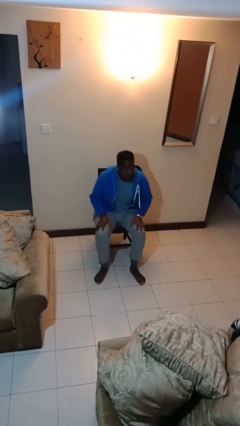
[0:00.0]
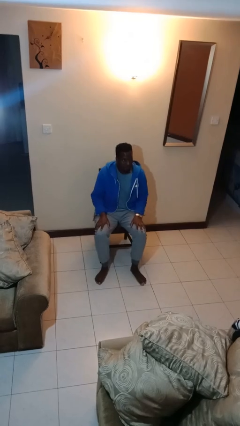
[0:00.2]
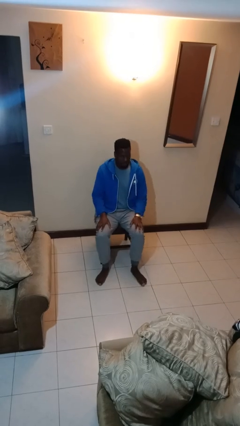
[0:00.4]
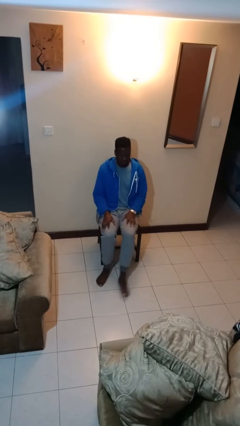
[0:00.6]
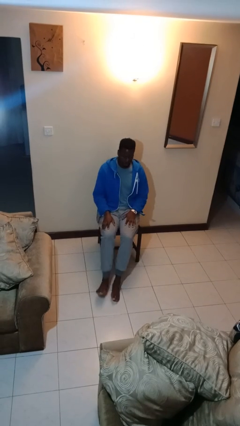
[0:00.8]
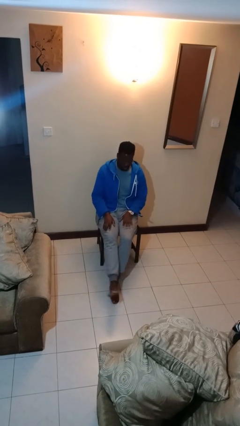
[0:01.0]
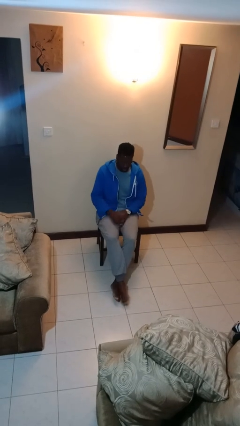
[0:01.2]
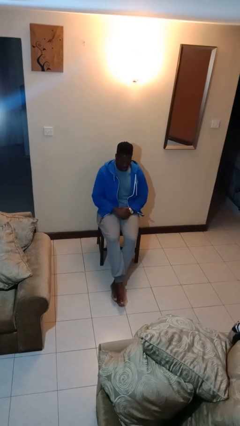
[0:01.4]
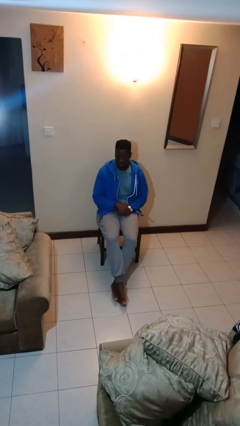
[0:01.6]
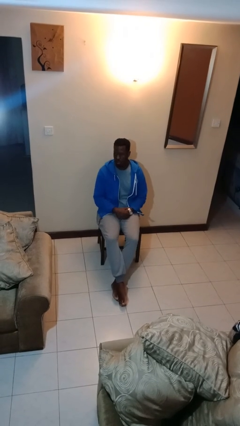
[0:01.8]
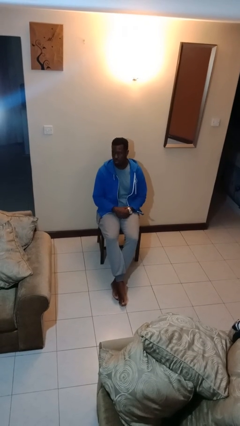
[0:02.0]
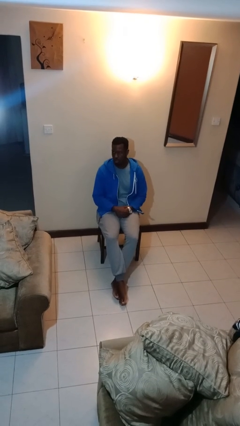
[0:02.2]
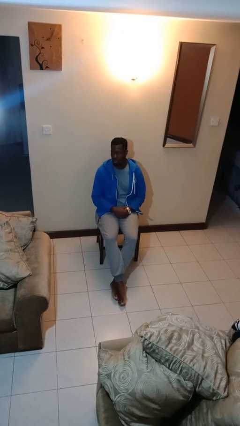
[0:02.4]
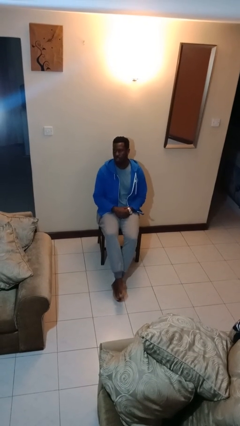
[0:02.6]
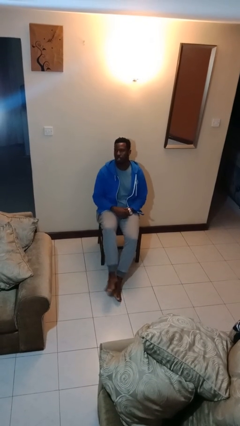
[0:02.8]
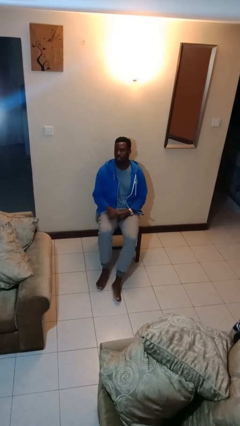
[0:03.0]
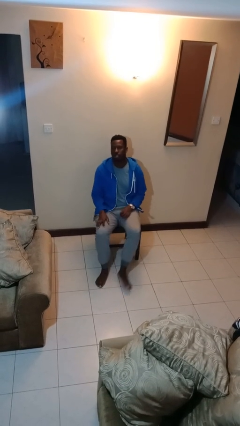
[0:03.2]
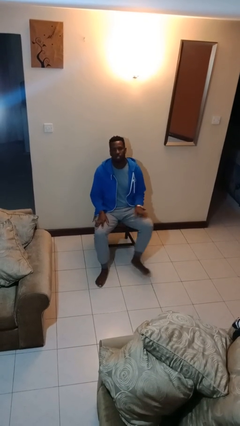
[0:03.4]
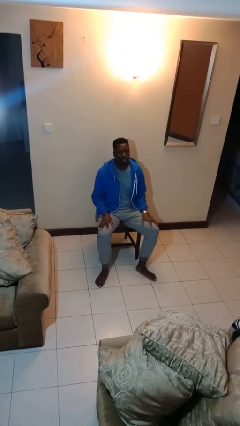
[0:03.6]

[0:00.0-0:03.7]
person crosses legs

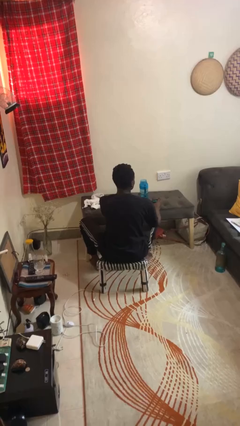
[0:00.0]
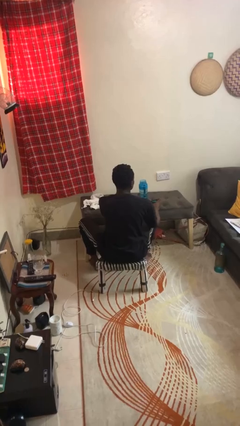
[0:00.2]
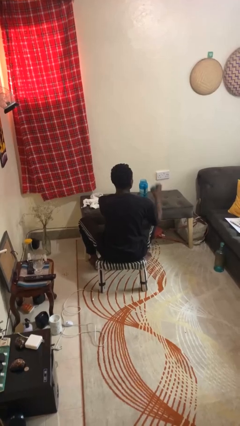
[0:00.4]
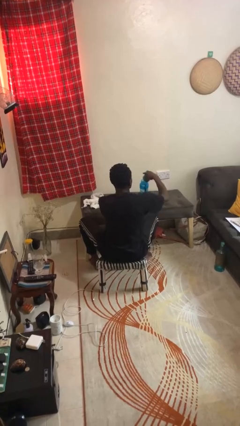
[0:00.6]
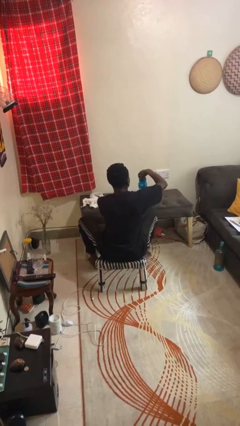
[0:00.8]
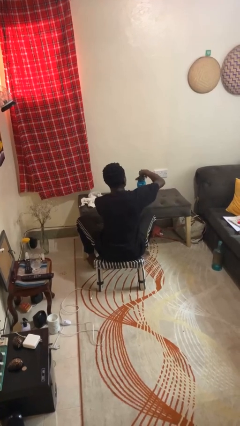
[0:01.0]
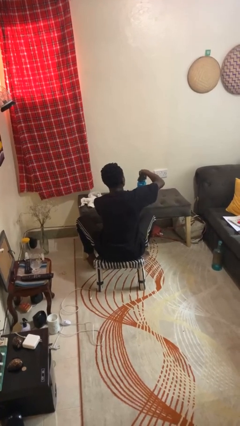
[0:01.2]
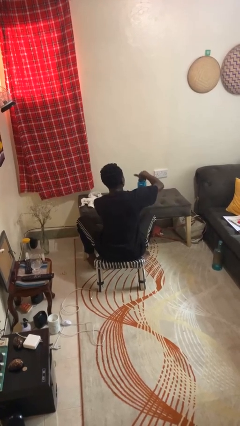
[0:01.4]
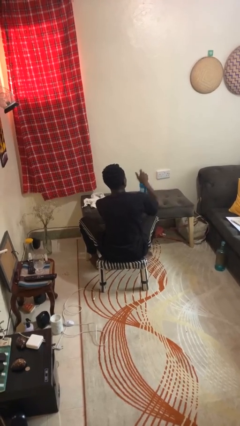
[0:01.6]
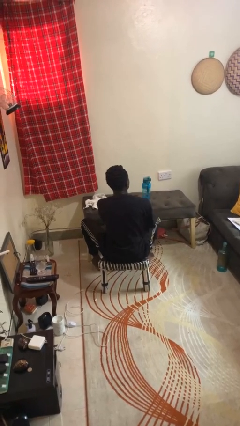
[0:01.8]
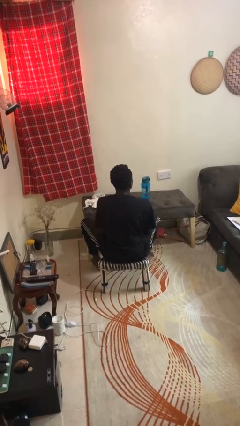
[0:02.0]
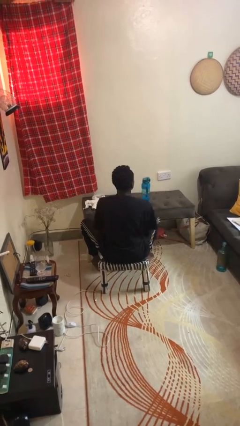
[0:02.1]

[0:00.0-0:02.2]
person closes jar

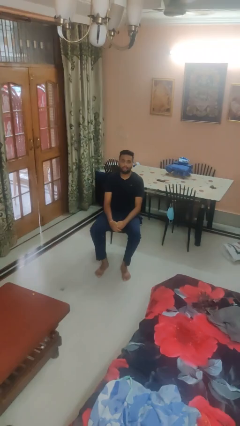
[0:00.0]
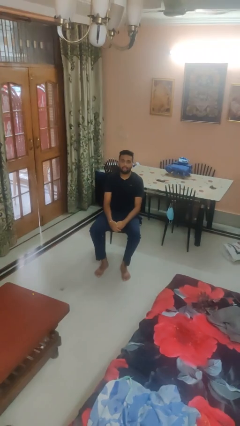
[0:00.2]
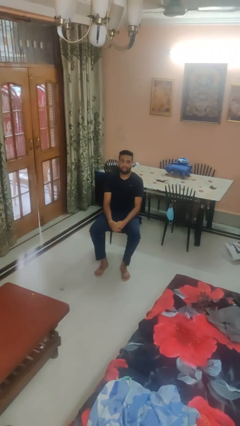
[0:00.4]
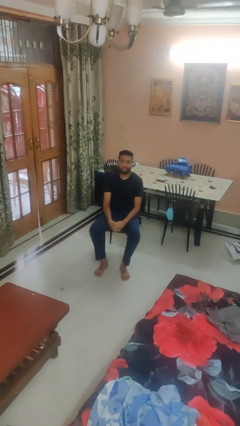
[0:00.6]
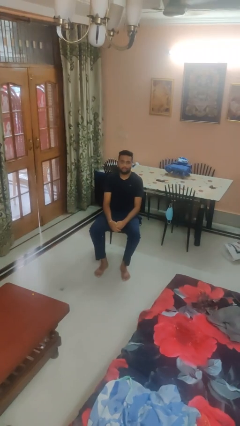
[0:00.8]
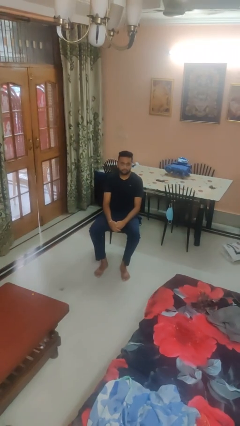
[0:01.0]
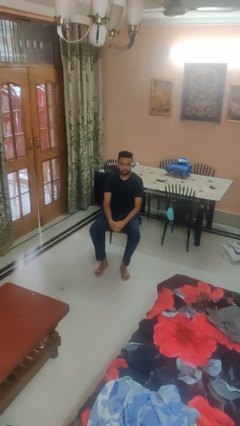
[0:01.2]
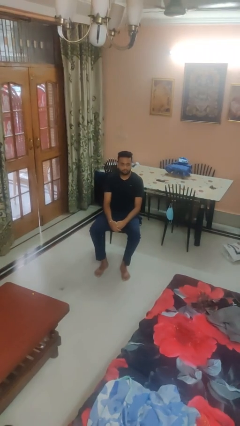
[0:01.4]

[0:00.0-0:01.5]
person sticks out tongue

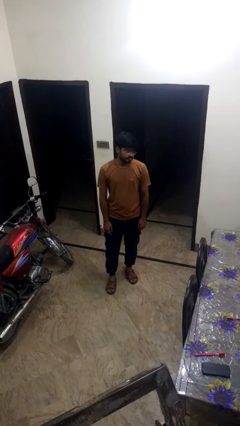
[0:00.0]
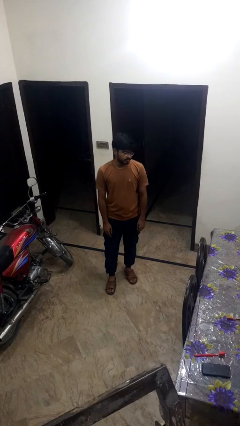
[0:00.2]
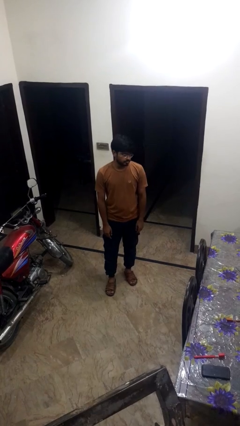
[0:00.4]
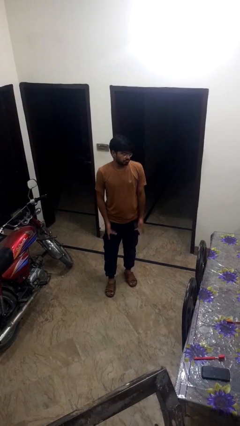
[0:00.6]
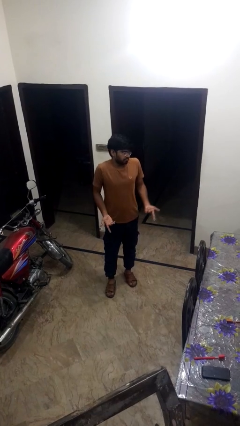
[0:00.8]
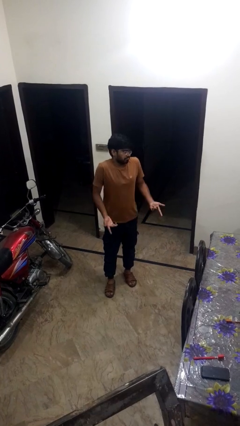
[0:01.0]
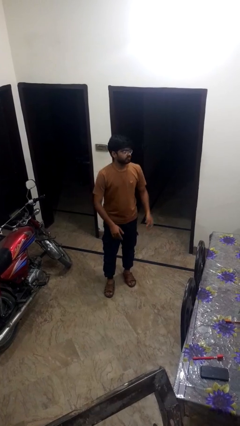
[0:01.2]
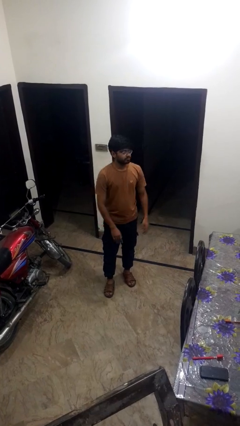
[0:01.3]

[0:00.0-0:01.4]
person shrugs

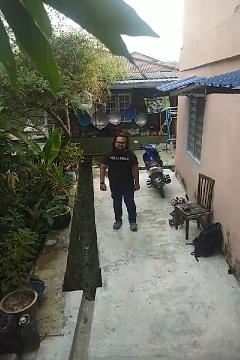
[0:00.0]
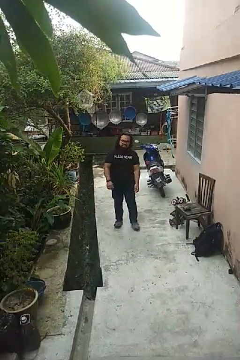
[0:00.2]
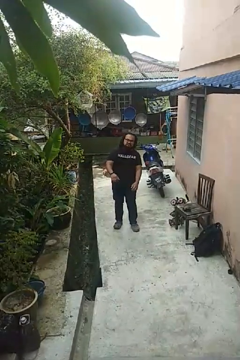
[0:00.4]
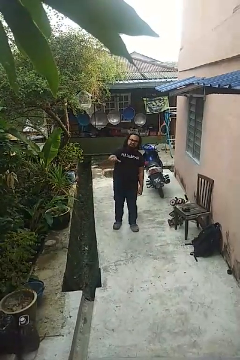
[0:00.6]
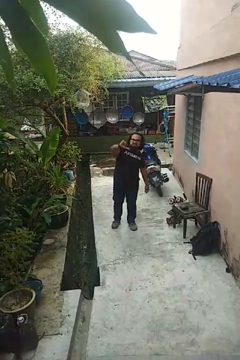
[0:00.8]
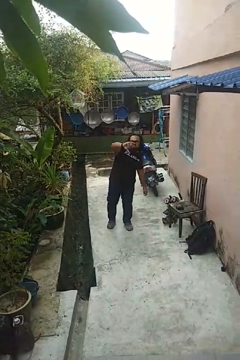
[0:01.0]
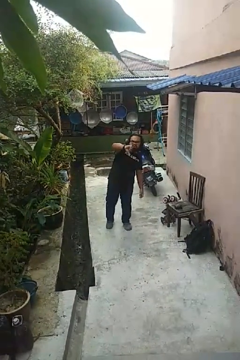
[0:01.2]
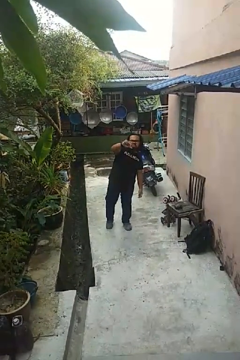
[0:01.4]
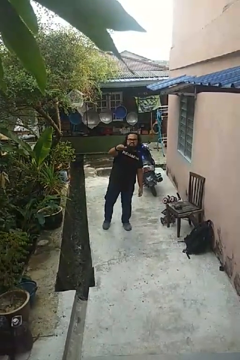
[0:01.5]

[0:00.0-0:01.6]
person gestures thumbs down

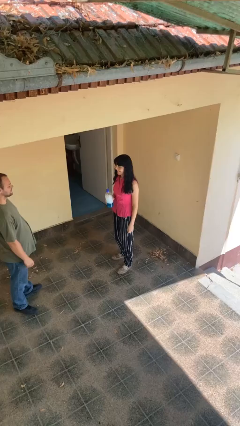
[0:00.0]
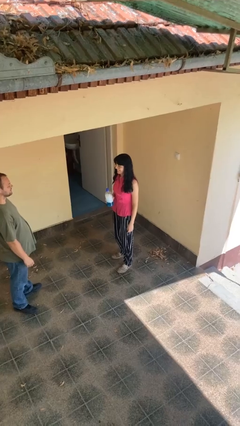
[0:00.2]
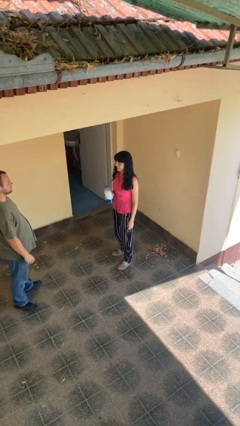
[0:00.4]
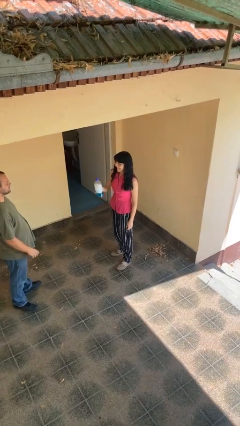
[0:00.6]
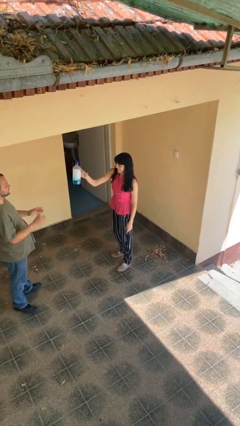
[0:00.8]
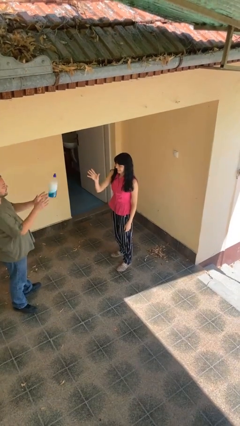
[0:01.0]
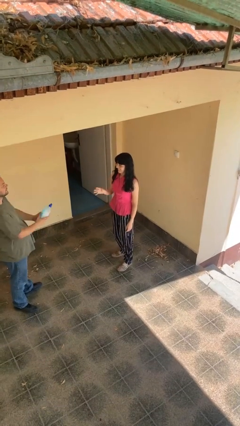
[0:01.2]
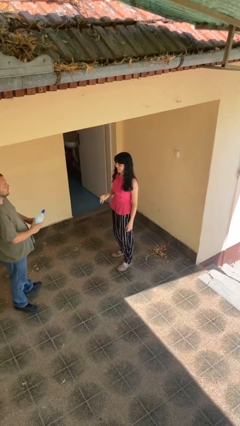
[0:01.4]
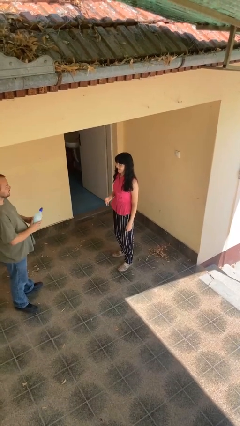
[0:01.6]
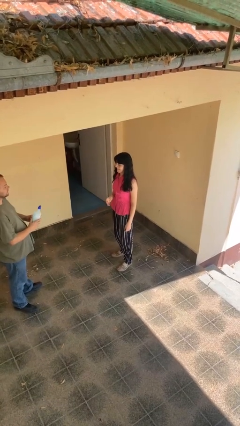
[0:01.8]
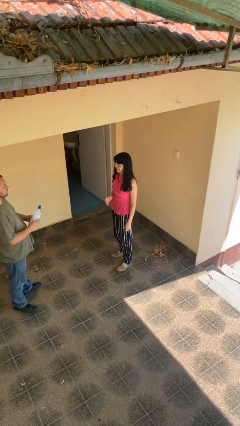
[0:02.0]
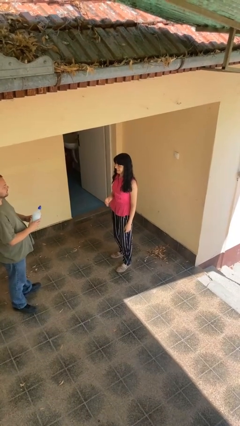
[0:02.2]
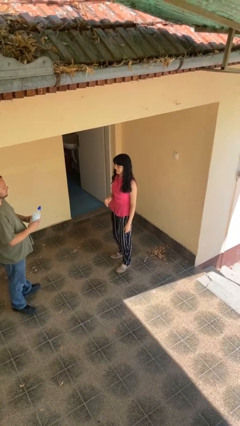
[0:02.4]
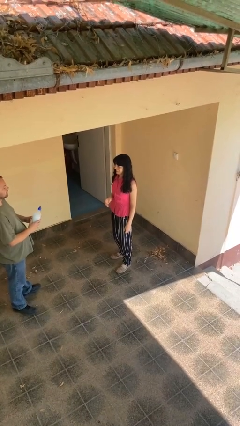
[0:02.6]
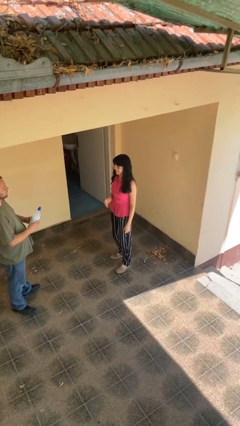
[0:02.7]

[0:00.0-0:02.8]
person throws object to person

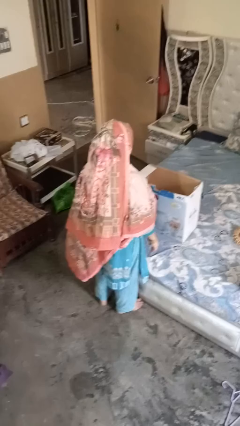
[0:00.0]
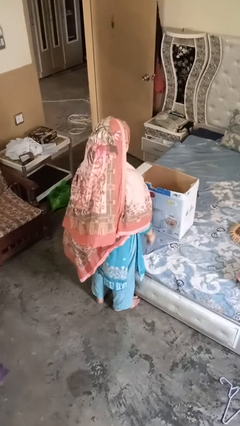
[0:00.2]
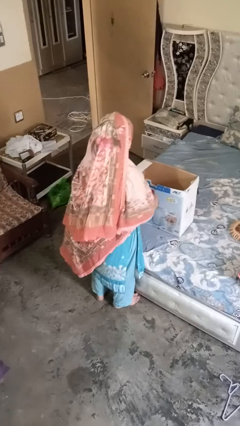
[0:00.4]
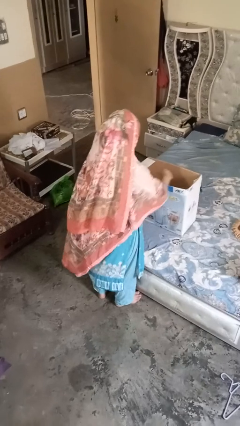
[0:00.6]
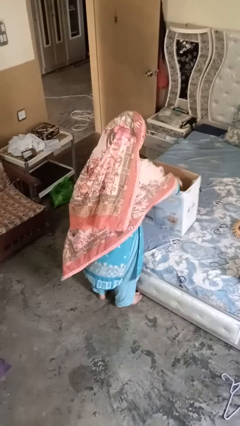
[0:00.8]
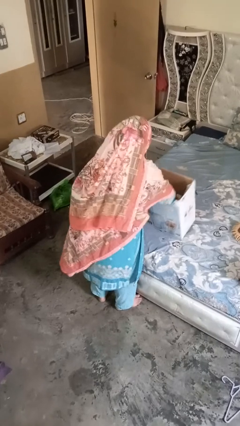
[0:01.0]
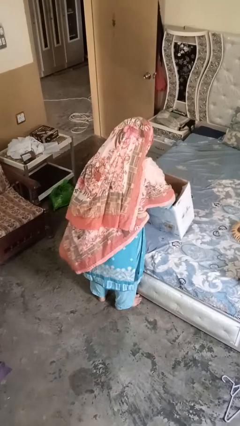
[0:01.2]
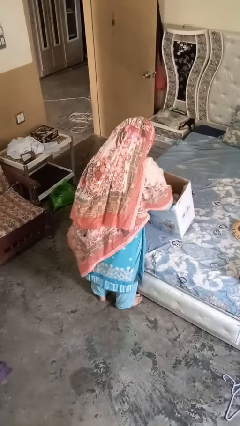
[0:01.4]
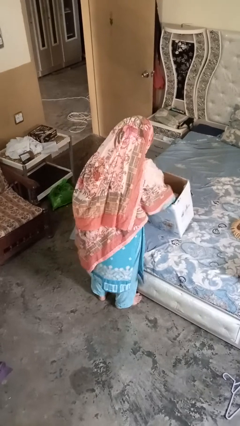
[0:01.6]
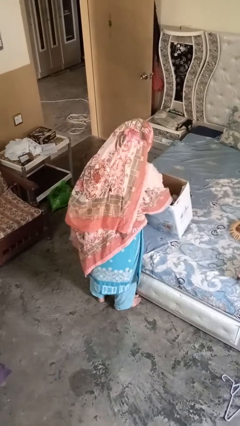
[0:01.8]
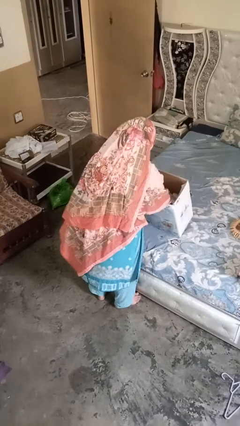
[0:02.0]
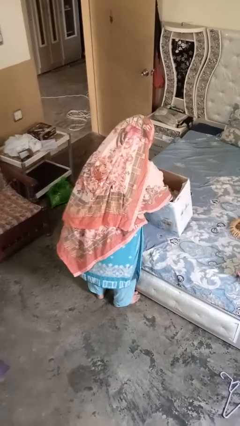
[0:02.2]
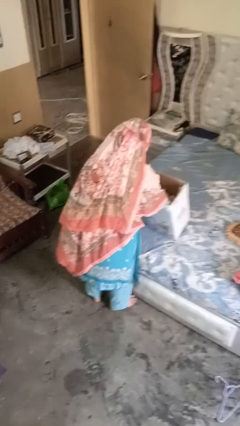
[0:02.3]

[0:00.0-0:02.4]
person searches in box

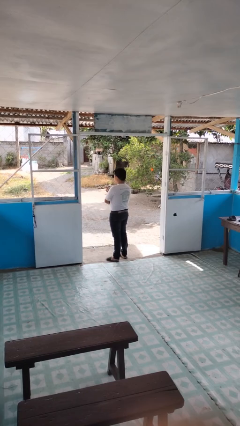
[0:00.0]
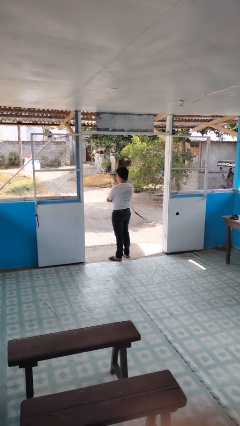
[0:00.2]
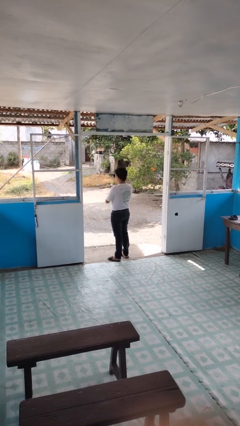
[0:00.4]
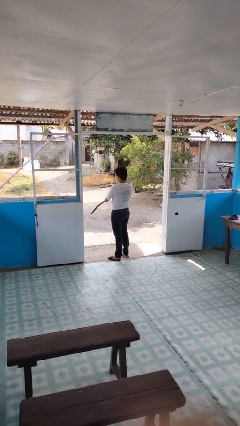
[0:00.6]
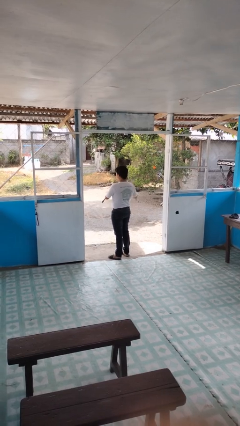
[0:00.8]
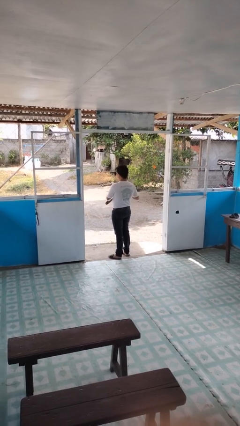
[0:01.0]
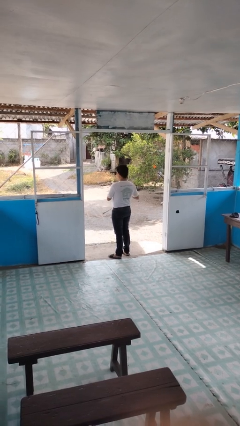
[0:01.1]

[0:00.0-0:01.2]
person takes off belt

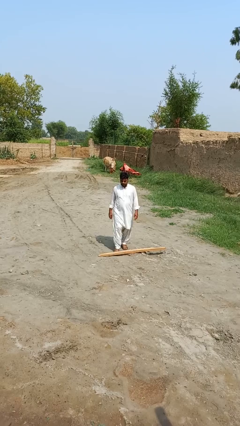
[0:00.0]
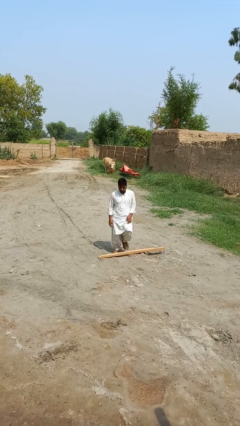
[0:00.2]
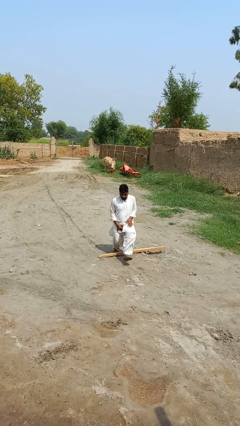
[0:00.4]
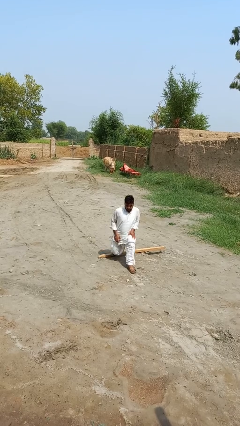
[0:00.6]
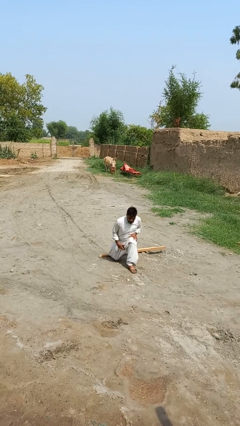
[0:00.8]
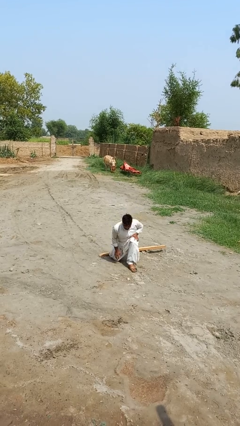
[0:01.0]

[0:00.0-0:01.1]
person trips on object on floor
